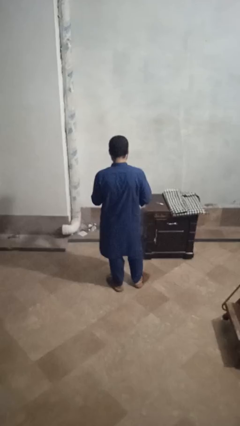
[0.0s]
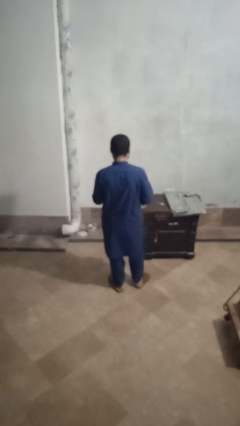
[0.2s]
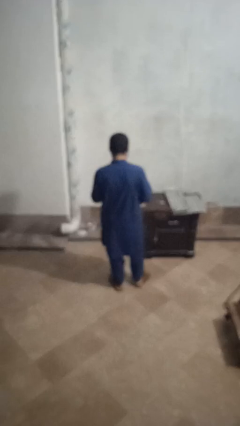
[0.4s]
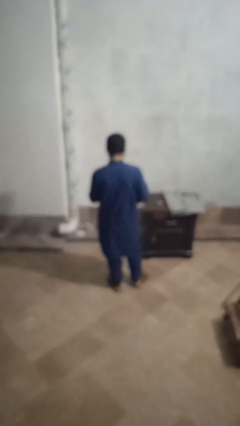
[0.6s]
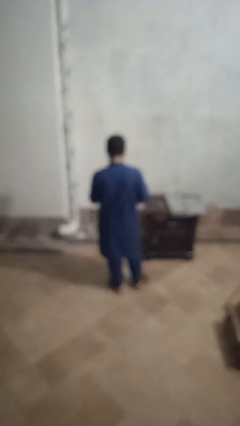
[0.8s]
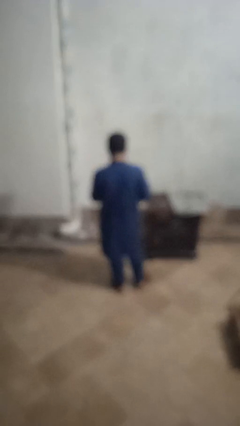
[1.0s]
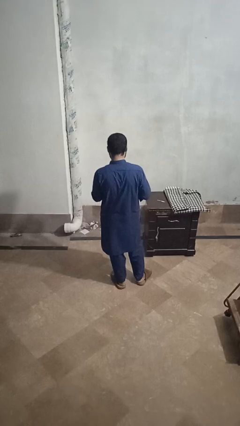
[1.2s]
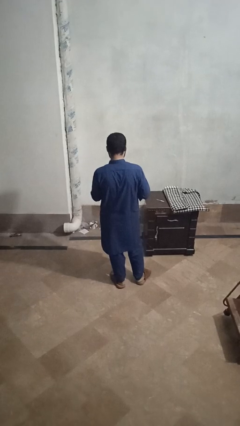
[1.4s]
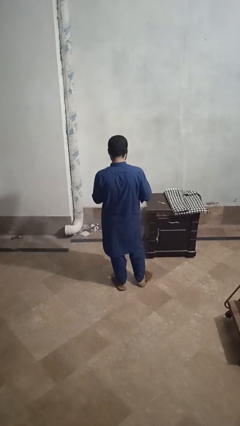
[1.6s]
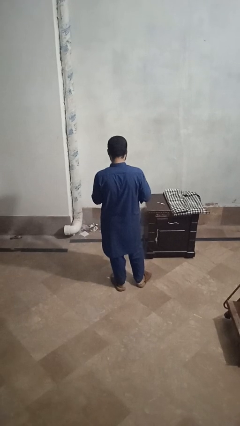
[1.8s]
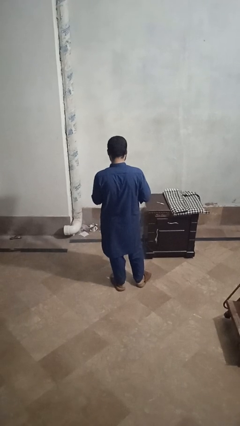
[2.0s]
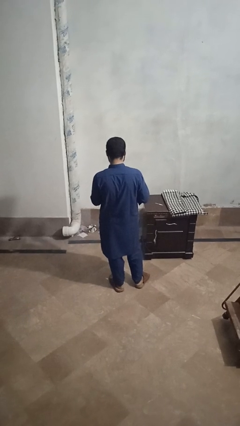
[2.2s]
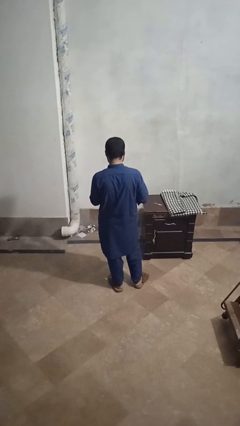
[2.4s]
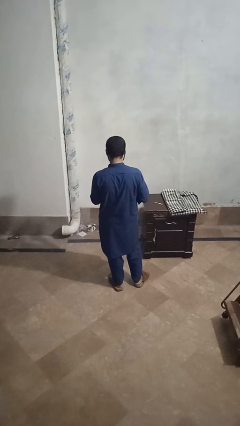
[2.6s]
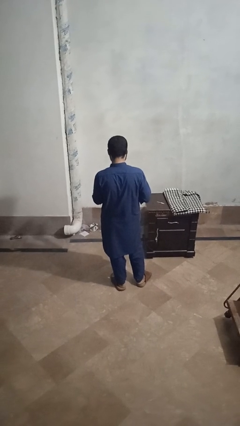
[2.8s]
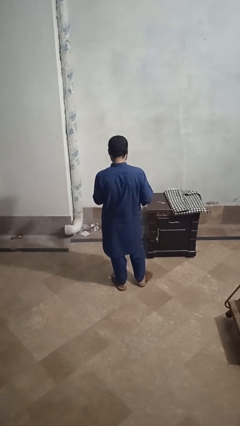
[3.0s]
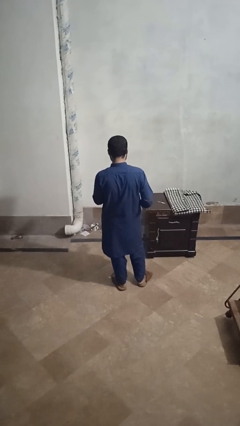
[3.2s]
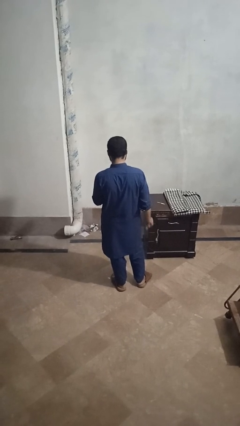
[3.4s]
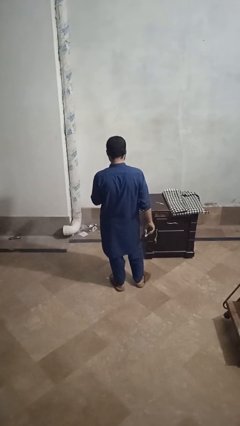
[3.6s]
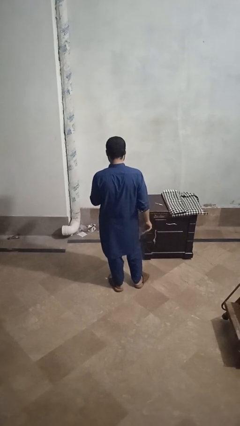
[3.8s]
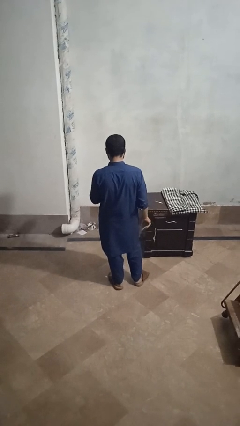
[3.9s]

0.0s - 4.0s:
person files fingernails

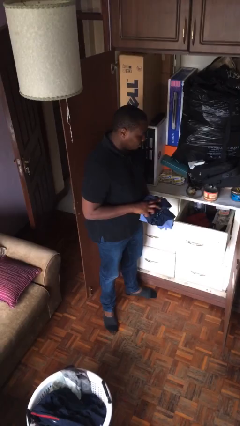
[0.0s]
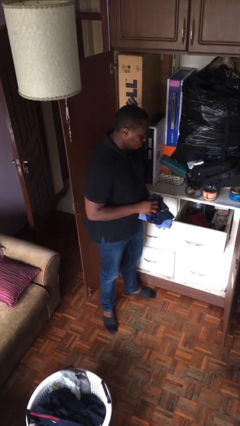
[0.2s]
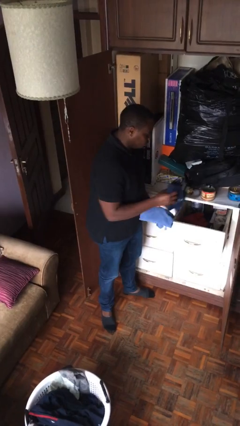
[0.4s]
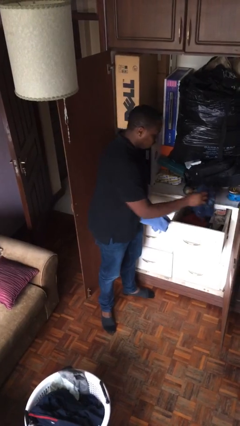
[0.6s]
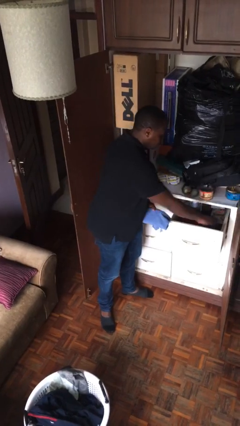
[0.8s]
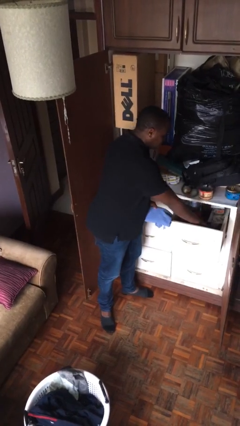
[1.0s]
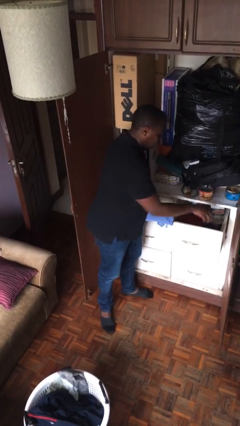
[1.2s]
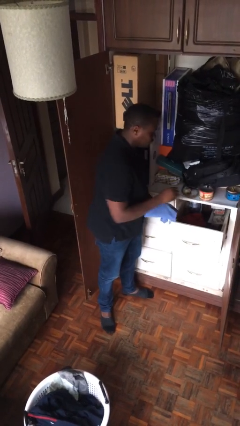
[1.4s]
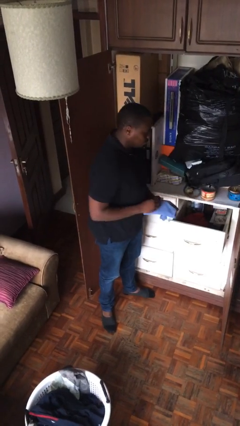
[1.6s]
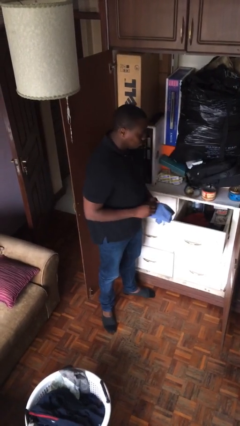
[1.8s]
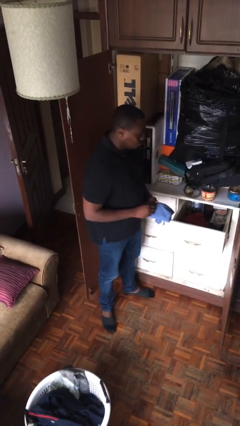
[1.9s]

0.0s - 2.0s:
person puts clothes into dresser

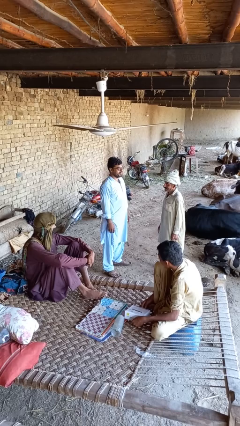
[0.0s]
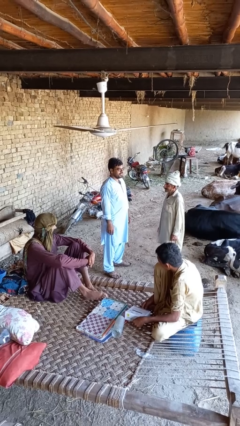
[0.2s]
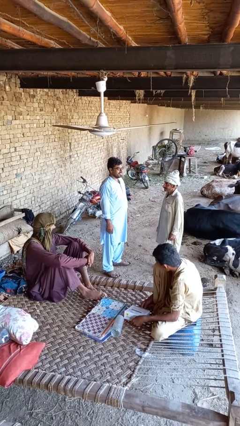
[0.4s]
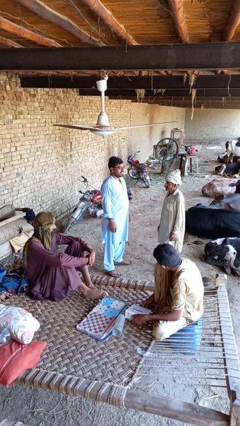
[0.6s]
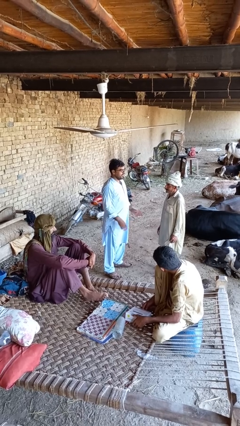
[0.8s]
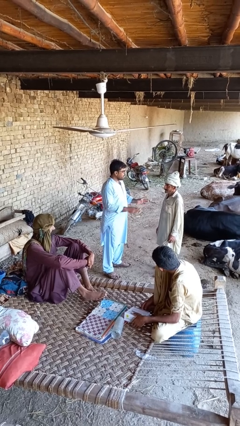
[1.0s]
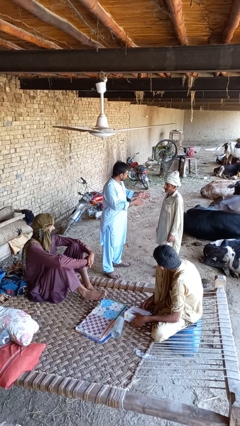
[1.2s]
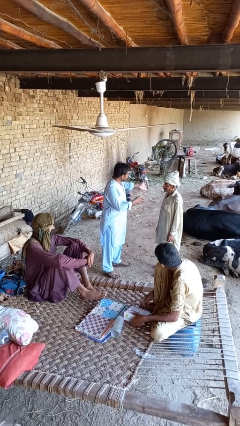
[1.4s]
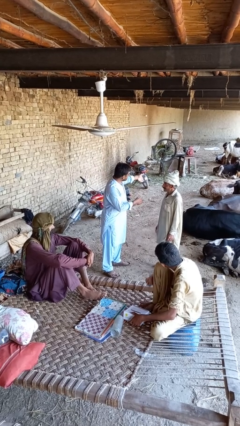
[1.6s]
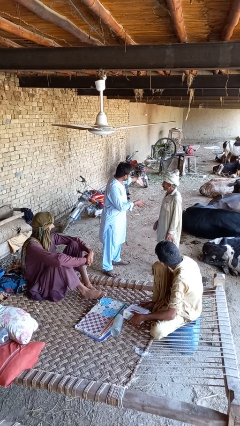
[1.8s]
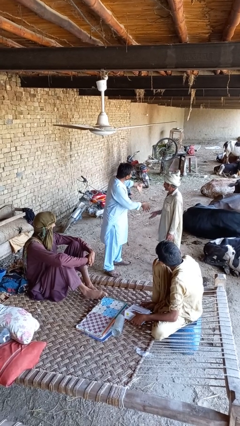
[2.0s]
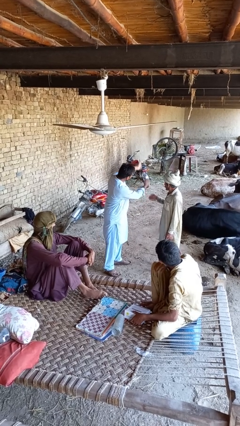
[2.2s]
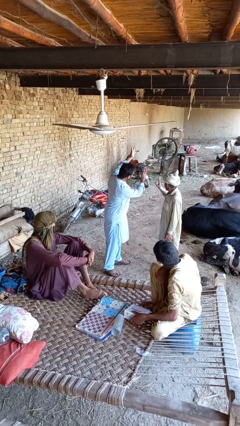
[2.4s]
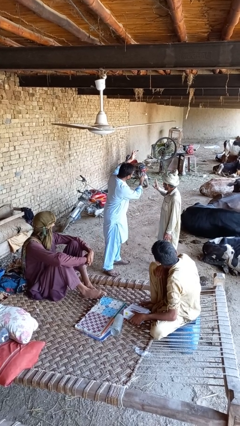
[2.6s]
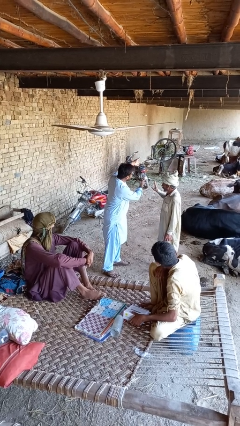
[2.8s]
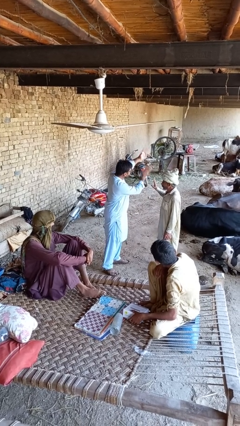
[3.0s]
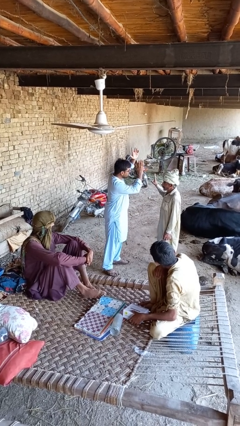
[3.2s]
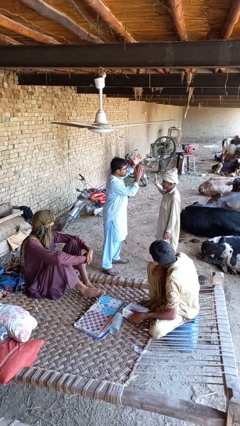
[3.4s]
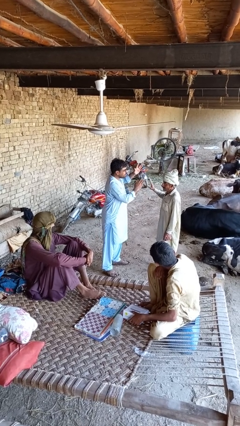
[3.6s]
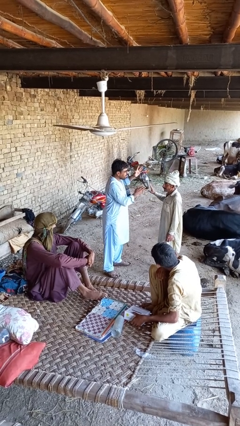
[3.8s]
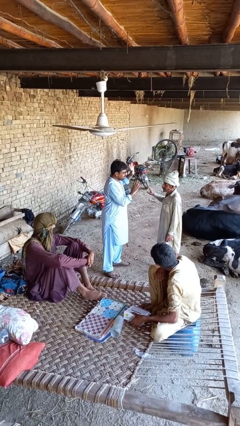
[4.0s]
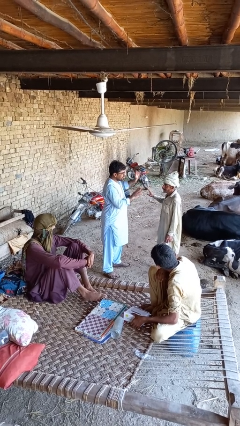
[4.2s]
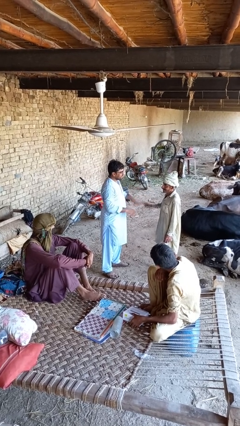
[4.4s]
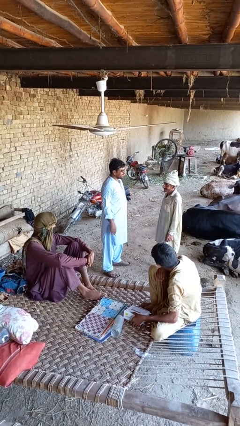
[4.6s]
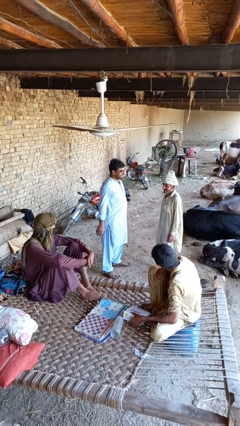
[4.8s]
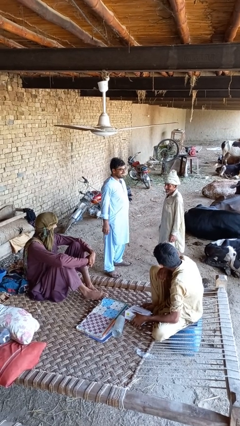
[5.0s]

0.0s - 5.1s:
person shoves person

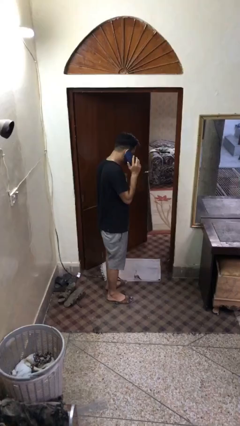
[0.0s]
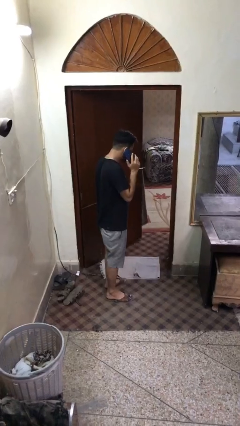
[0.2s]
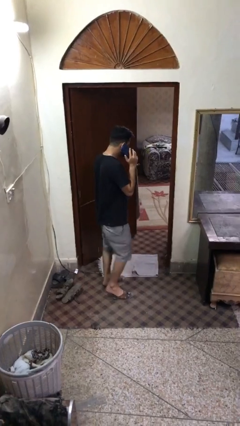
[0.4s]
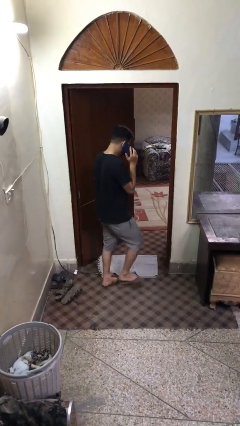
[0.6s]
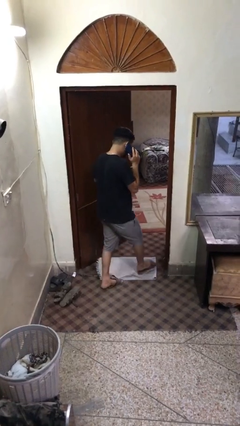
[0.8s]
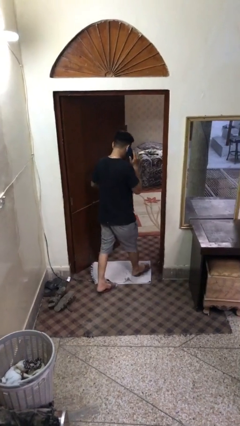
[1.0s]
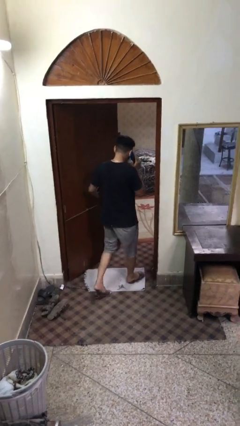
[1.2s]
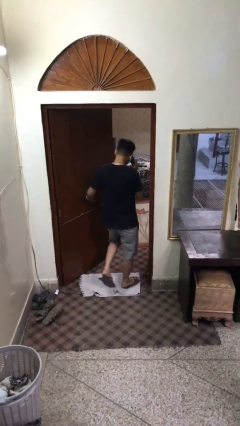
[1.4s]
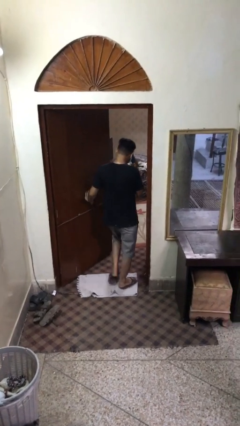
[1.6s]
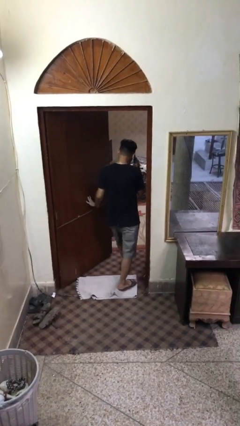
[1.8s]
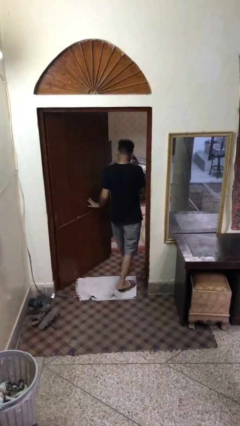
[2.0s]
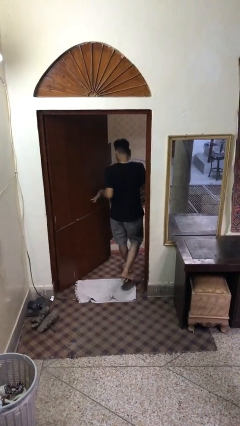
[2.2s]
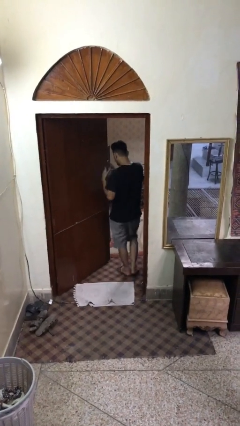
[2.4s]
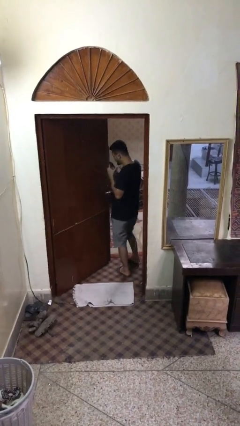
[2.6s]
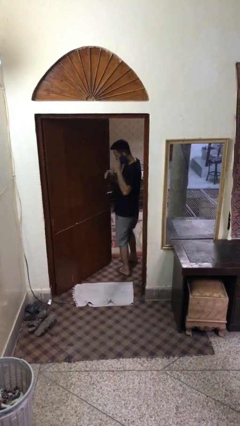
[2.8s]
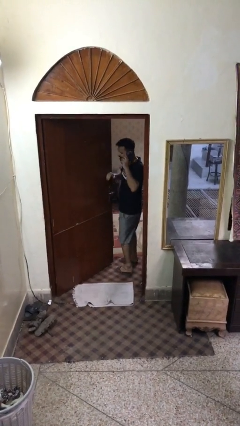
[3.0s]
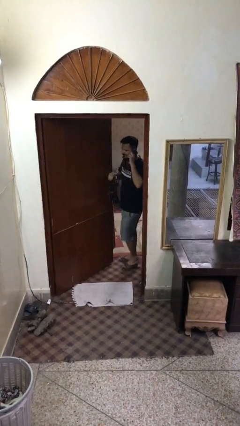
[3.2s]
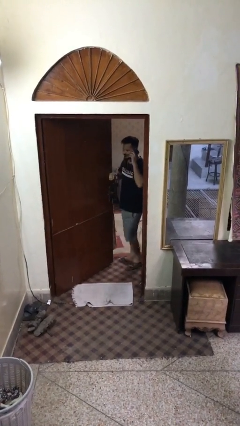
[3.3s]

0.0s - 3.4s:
person exits scene through structure

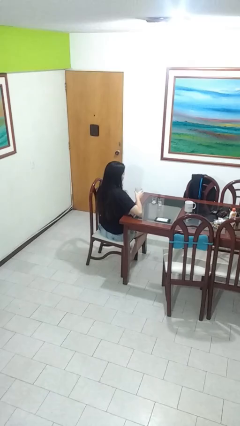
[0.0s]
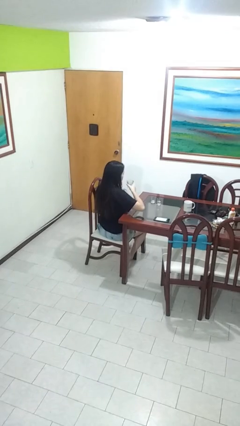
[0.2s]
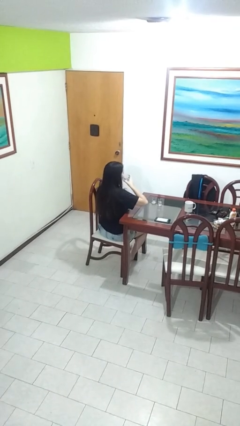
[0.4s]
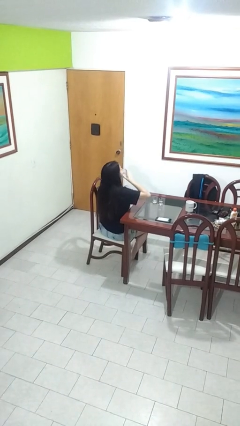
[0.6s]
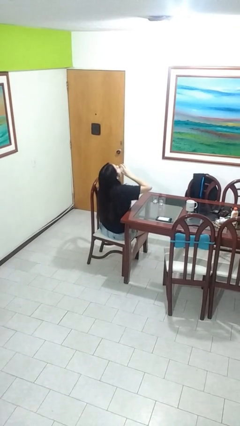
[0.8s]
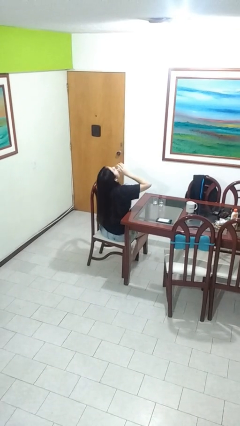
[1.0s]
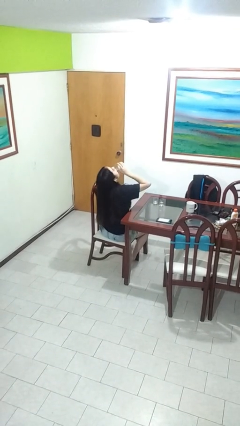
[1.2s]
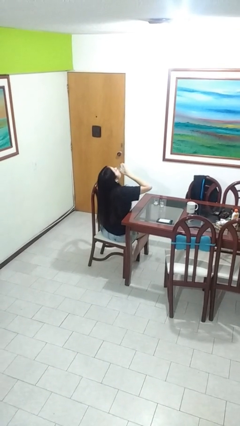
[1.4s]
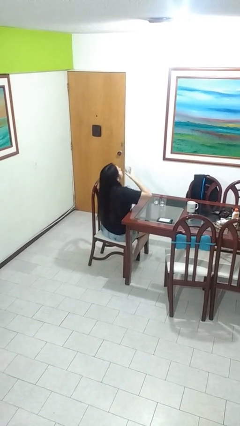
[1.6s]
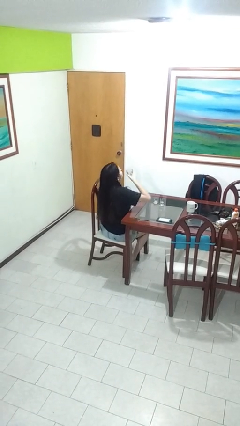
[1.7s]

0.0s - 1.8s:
person drinks from shotglass

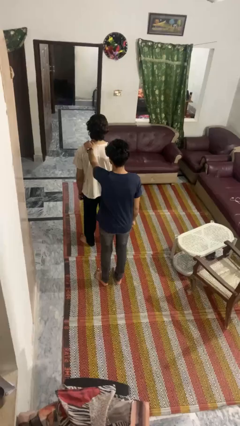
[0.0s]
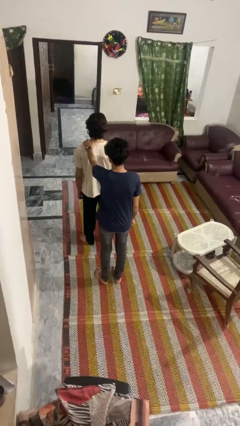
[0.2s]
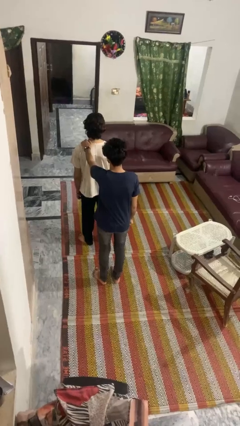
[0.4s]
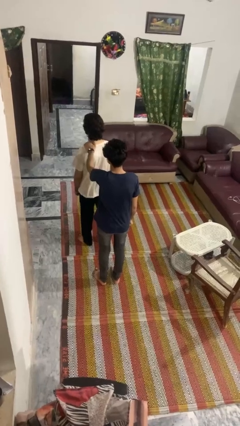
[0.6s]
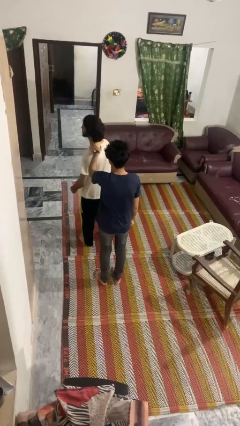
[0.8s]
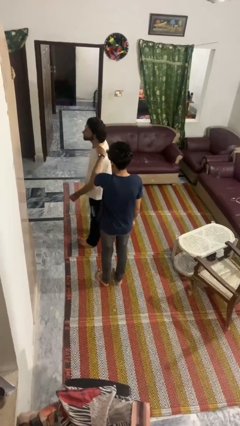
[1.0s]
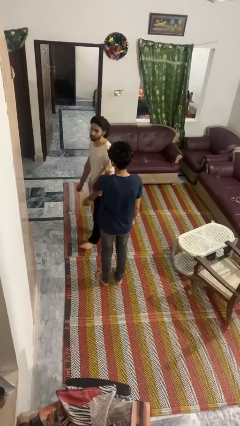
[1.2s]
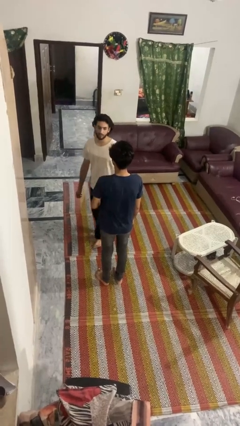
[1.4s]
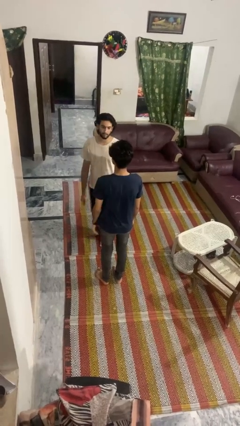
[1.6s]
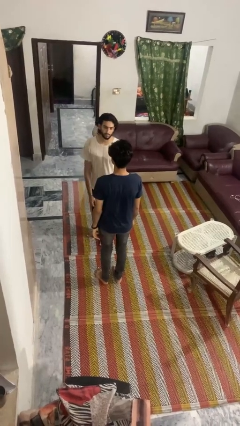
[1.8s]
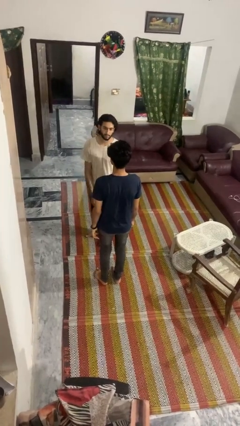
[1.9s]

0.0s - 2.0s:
person spins person around
